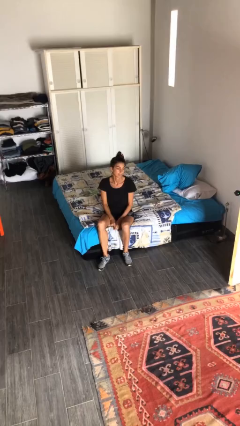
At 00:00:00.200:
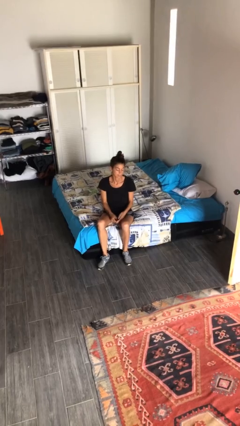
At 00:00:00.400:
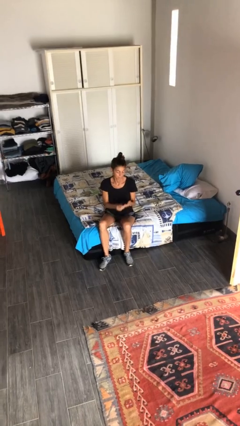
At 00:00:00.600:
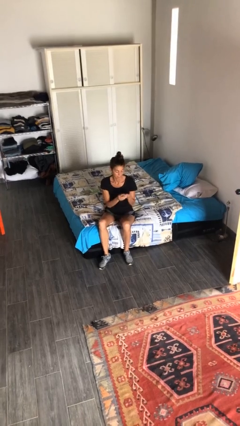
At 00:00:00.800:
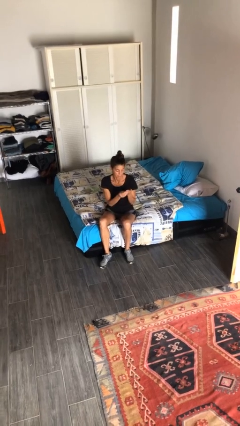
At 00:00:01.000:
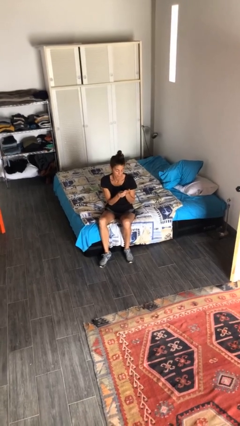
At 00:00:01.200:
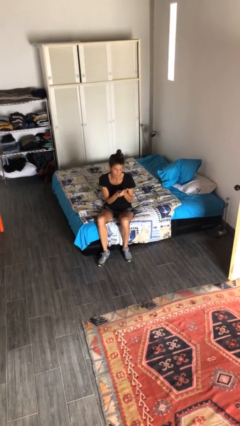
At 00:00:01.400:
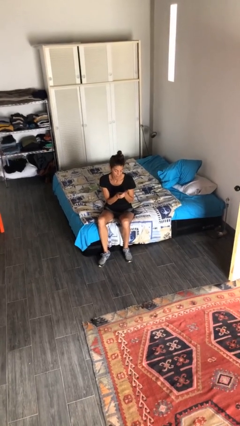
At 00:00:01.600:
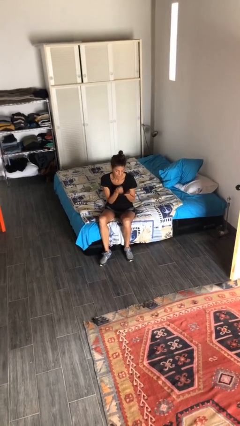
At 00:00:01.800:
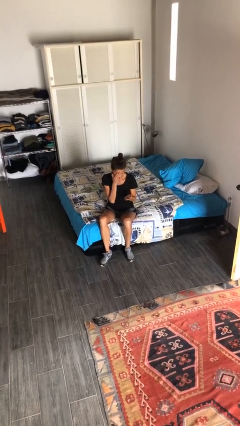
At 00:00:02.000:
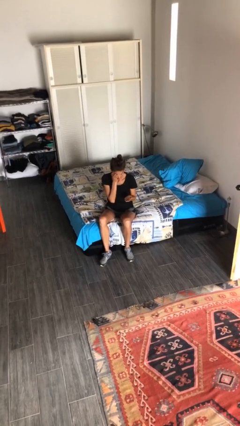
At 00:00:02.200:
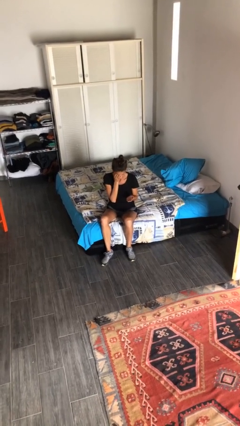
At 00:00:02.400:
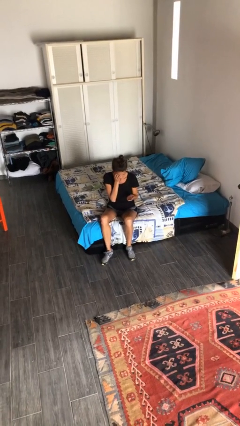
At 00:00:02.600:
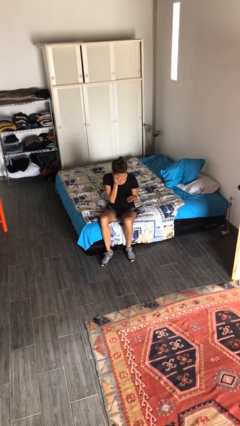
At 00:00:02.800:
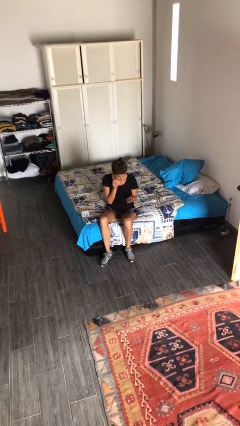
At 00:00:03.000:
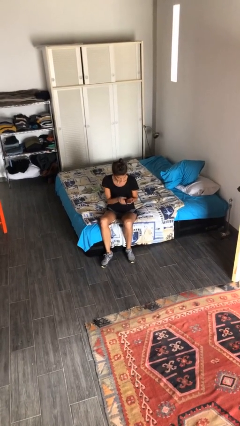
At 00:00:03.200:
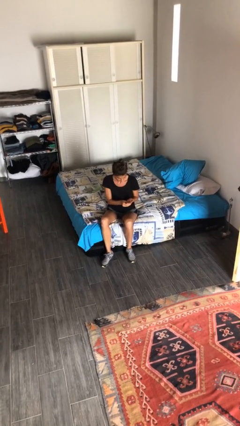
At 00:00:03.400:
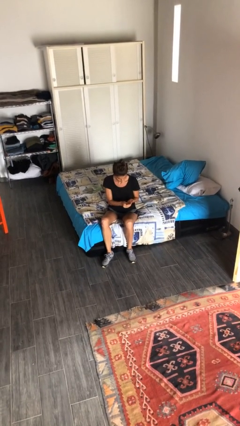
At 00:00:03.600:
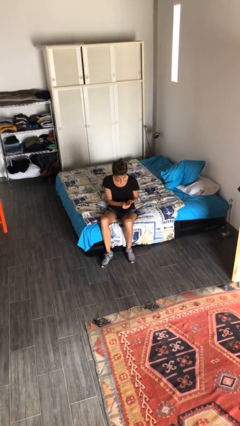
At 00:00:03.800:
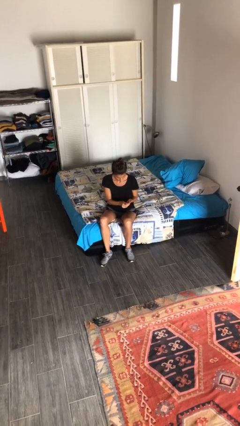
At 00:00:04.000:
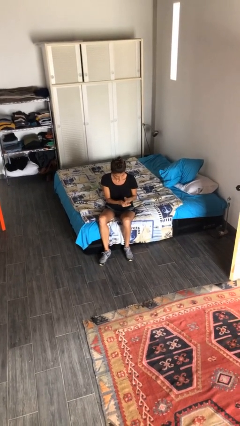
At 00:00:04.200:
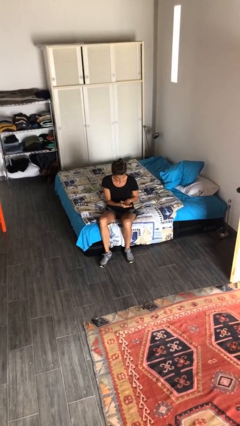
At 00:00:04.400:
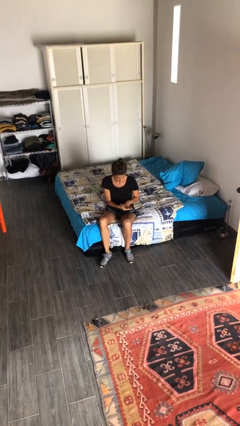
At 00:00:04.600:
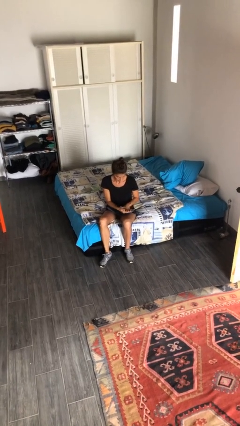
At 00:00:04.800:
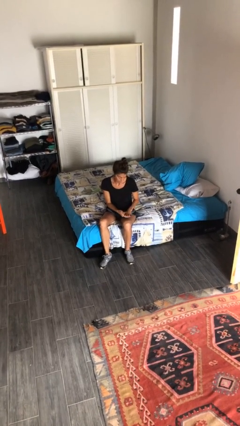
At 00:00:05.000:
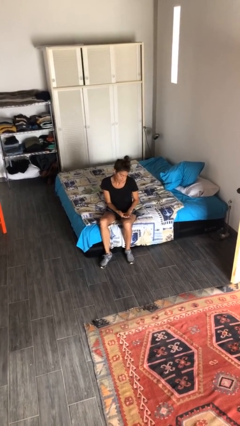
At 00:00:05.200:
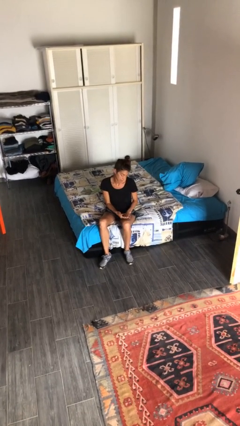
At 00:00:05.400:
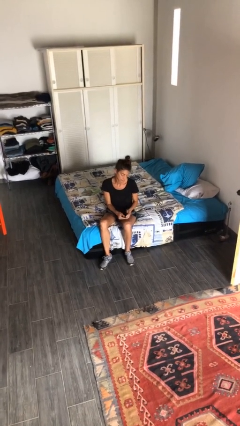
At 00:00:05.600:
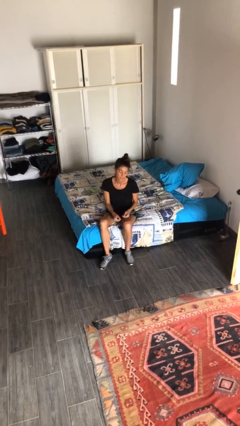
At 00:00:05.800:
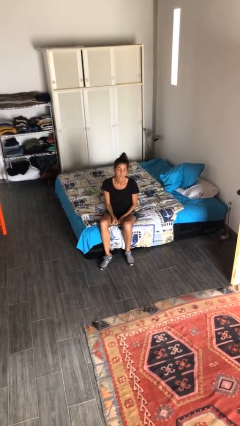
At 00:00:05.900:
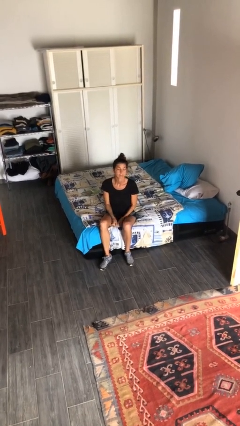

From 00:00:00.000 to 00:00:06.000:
person looks at hands in lap

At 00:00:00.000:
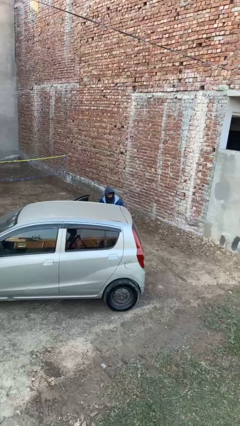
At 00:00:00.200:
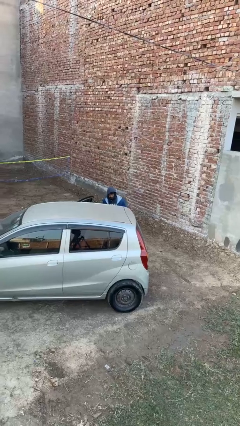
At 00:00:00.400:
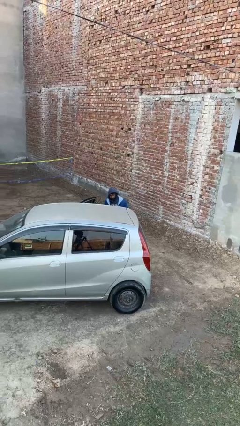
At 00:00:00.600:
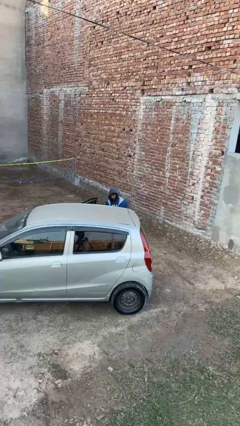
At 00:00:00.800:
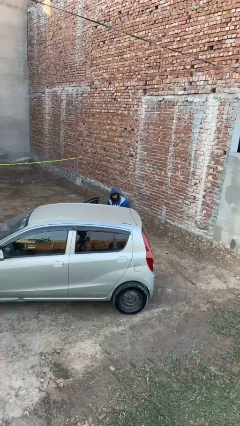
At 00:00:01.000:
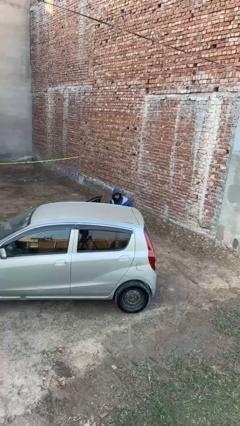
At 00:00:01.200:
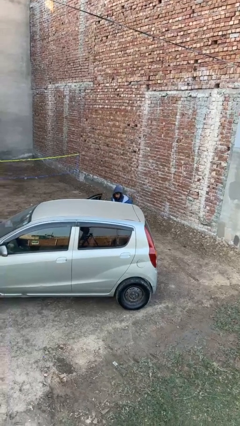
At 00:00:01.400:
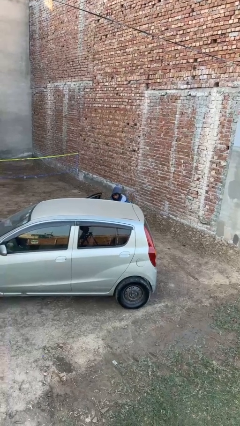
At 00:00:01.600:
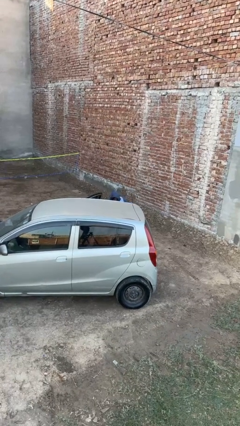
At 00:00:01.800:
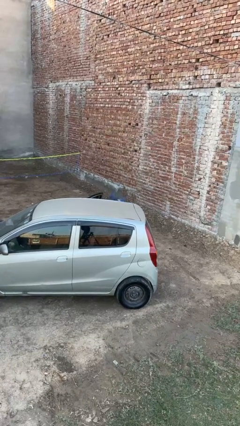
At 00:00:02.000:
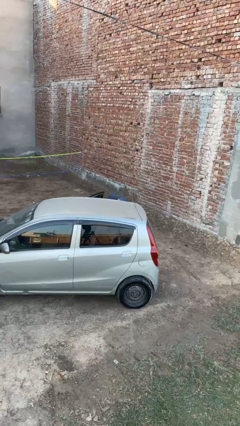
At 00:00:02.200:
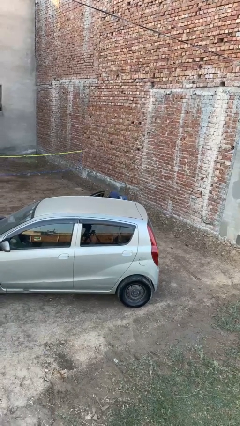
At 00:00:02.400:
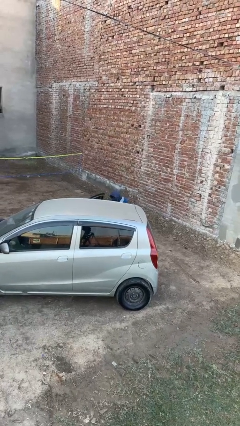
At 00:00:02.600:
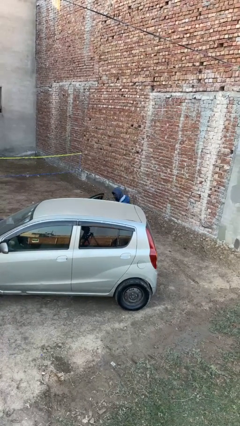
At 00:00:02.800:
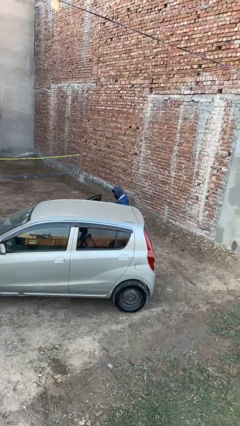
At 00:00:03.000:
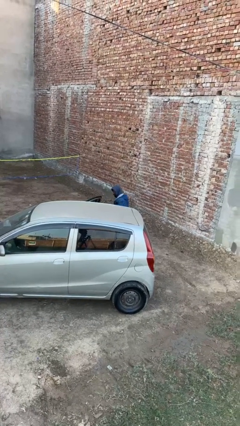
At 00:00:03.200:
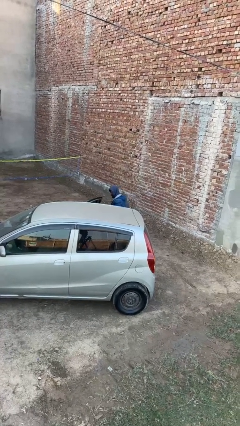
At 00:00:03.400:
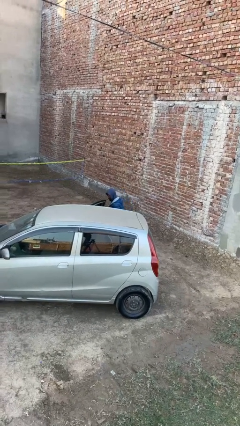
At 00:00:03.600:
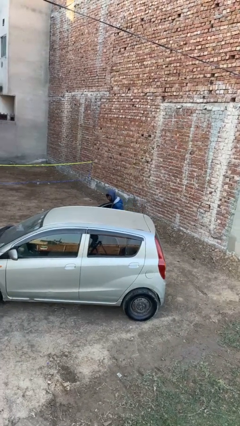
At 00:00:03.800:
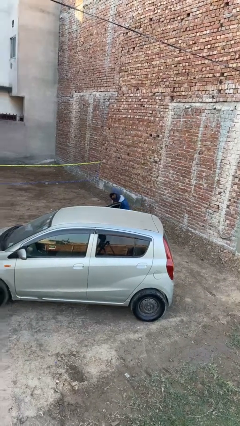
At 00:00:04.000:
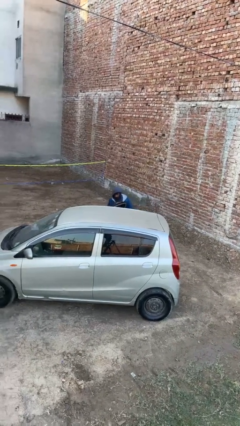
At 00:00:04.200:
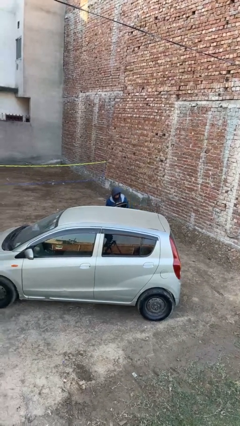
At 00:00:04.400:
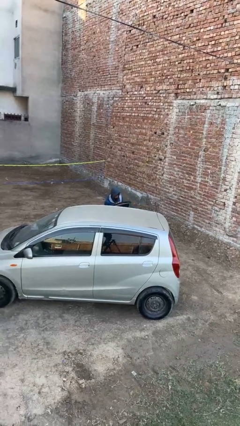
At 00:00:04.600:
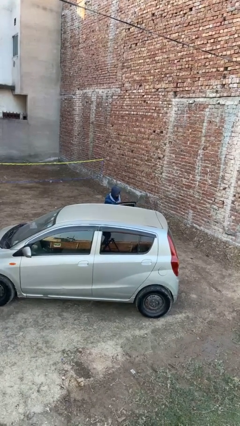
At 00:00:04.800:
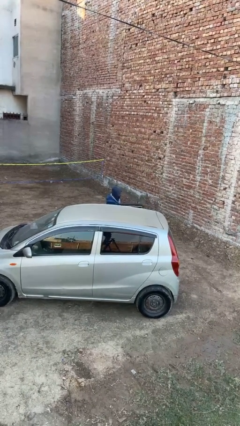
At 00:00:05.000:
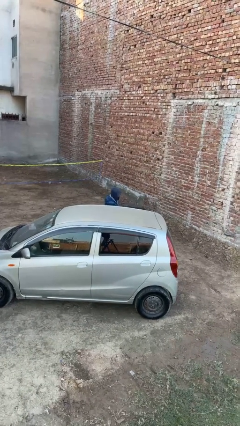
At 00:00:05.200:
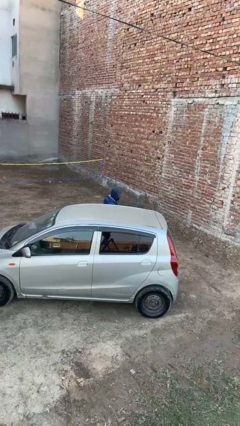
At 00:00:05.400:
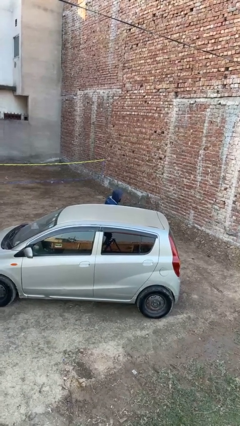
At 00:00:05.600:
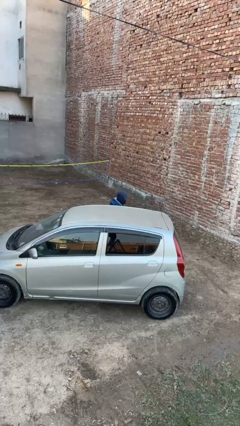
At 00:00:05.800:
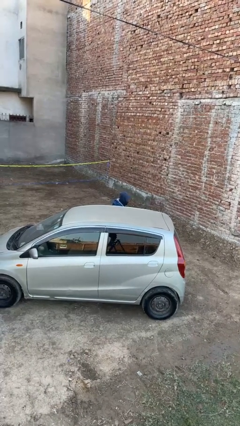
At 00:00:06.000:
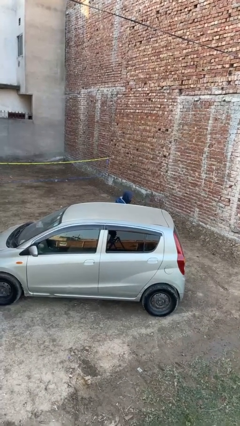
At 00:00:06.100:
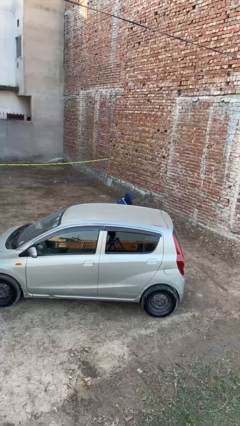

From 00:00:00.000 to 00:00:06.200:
person unloads car

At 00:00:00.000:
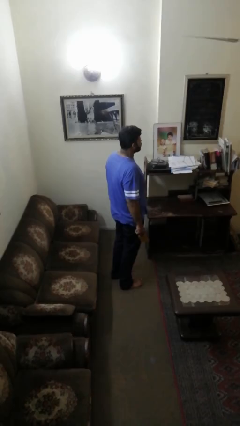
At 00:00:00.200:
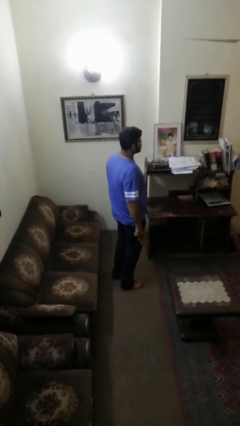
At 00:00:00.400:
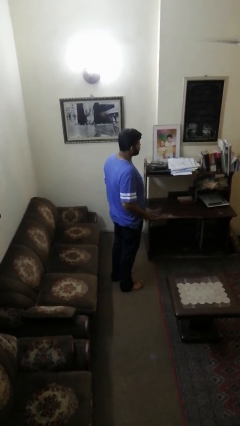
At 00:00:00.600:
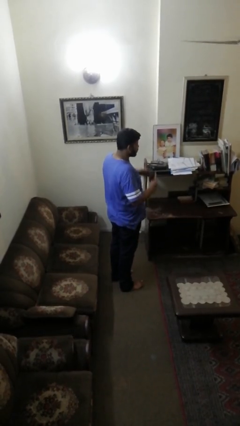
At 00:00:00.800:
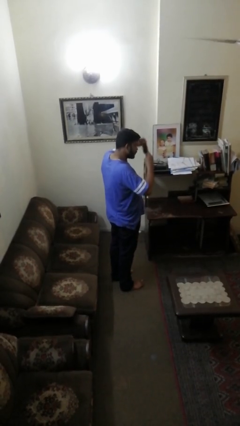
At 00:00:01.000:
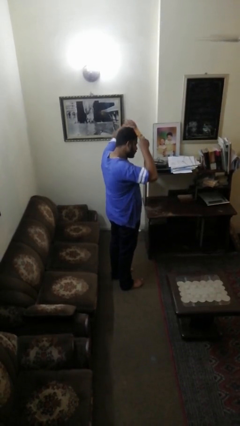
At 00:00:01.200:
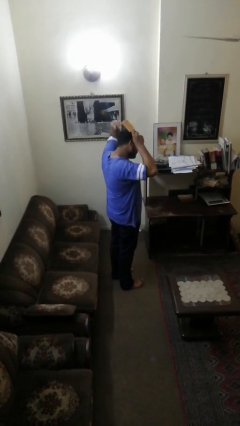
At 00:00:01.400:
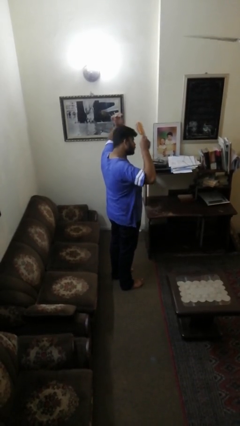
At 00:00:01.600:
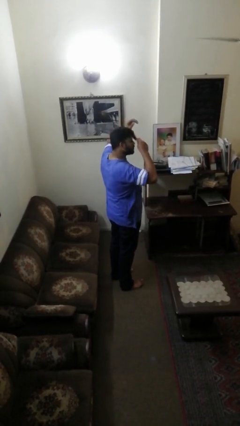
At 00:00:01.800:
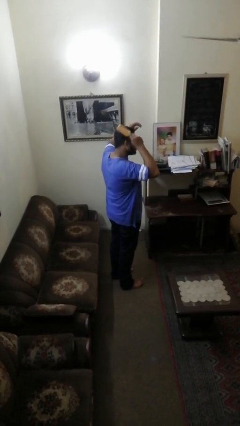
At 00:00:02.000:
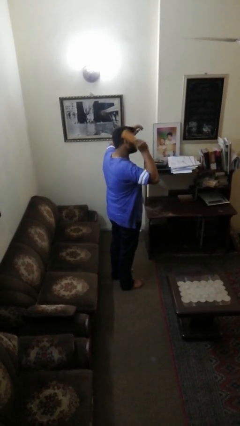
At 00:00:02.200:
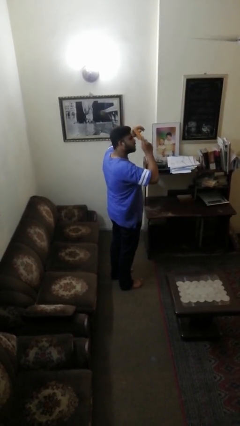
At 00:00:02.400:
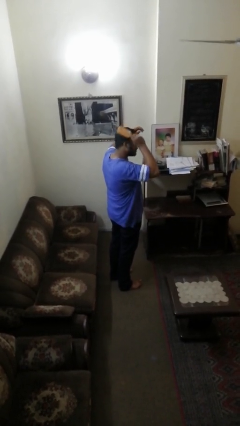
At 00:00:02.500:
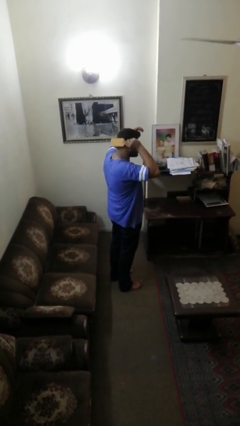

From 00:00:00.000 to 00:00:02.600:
person brushes hair

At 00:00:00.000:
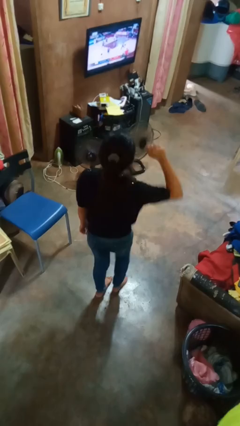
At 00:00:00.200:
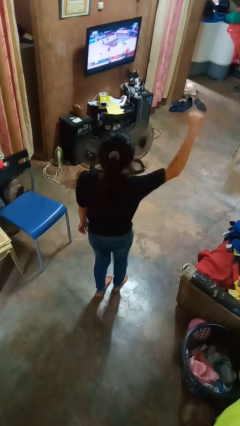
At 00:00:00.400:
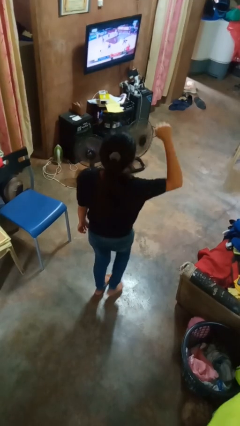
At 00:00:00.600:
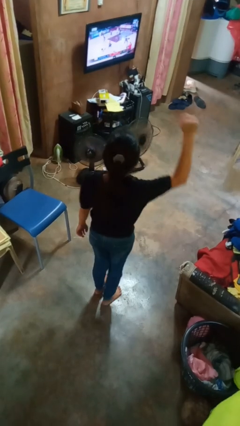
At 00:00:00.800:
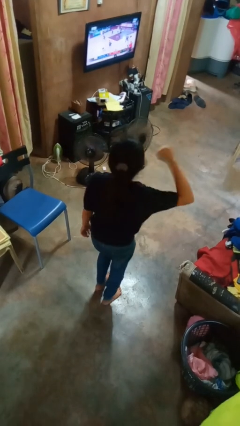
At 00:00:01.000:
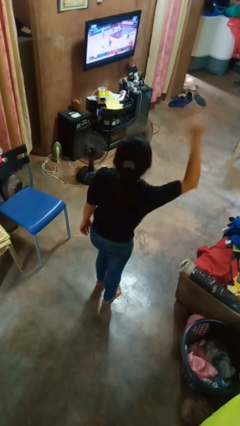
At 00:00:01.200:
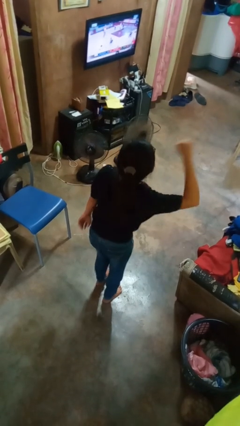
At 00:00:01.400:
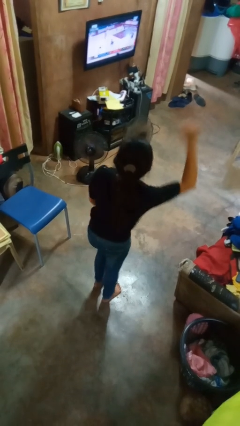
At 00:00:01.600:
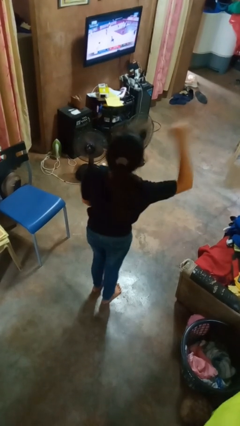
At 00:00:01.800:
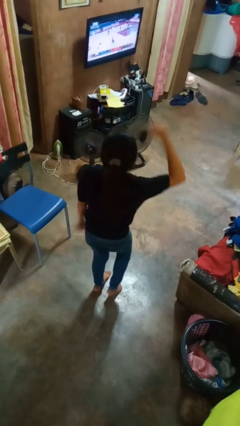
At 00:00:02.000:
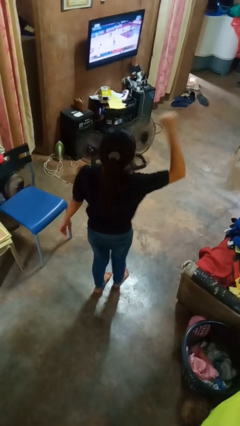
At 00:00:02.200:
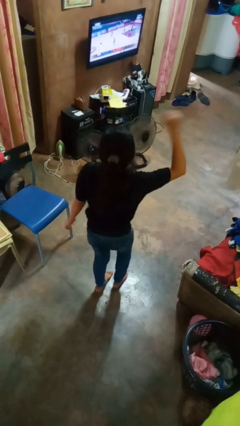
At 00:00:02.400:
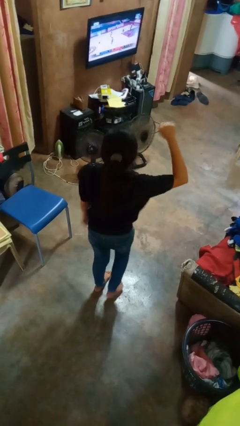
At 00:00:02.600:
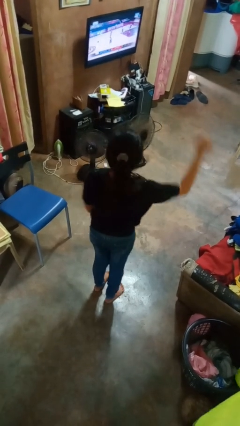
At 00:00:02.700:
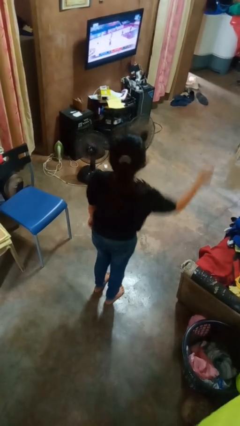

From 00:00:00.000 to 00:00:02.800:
person dances in place
